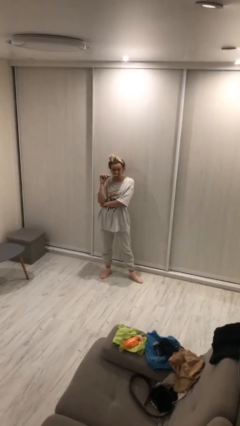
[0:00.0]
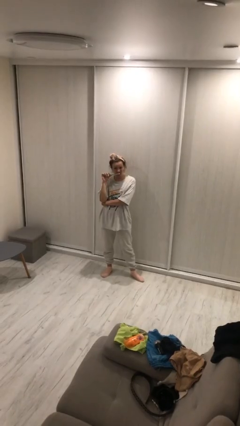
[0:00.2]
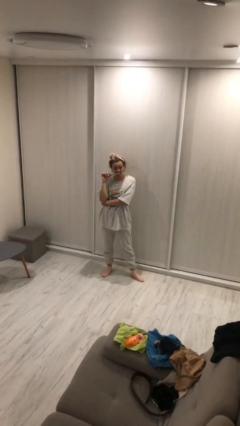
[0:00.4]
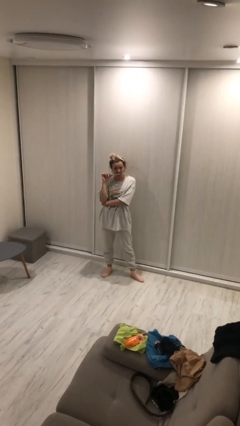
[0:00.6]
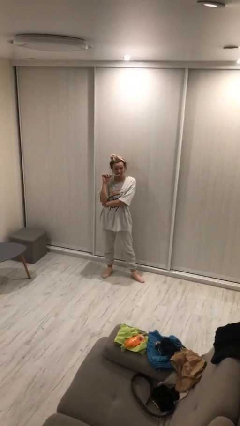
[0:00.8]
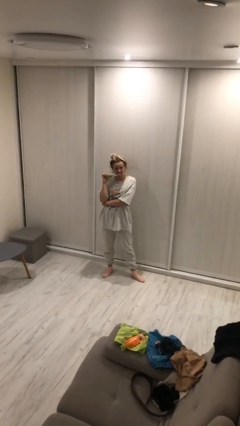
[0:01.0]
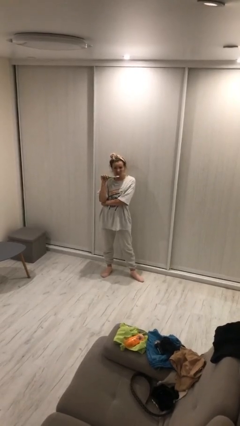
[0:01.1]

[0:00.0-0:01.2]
person brushes teeth

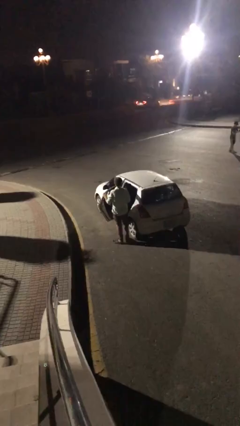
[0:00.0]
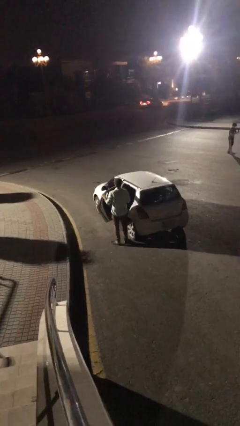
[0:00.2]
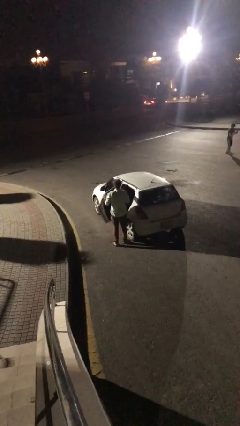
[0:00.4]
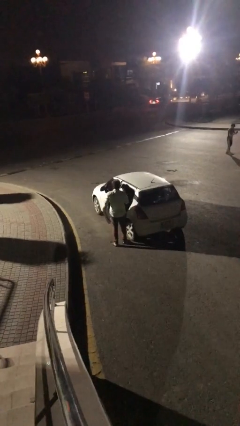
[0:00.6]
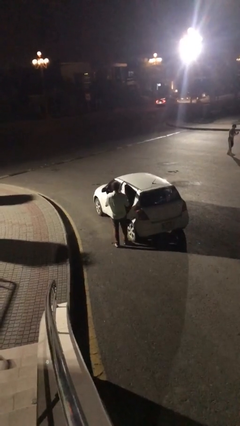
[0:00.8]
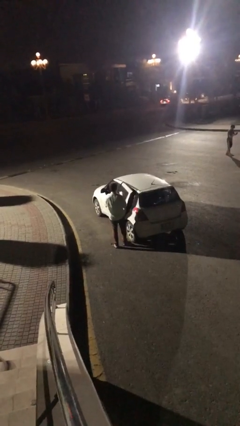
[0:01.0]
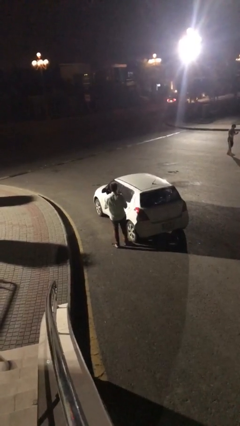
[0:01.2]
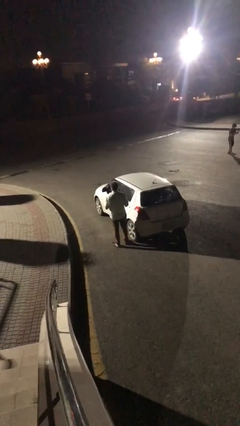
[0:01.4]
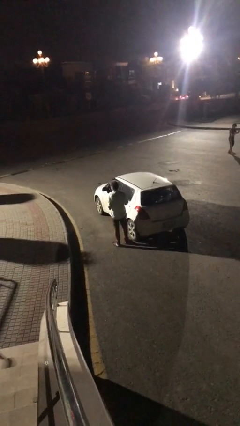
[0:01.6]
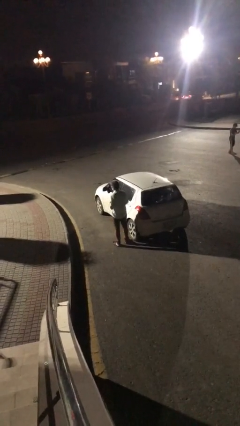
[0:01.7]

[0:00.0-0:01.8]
person closes car door

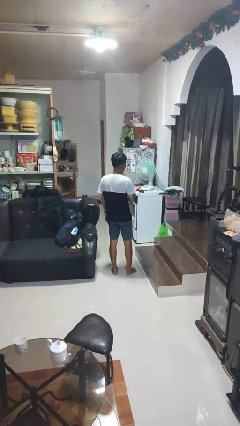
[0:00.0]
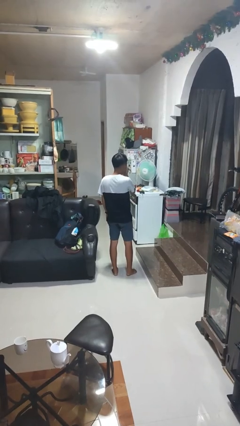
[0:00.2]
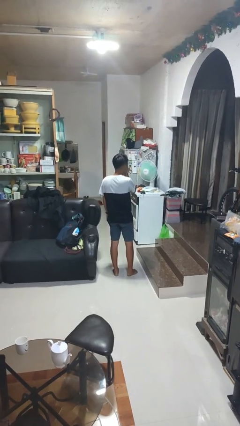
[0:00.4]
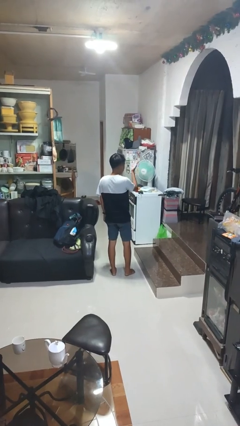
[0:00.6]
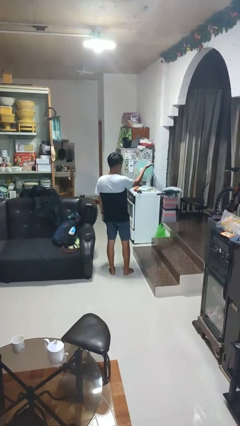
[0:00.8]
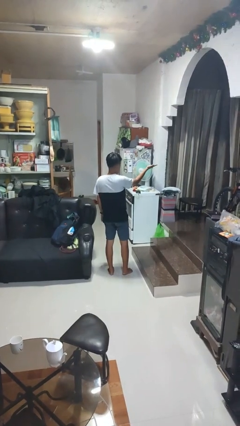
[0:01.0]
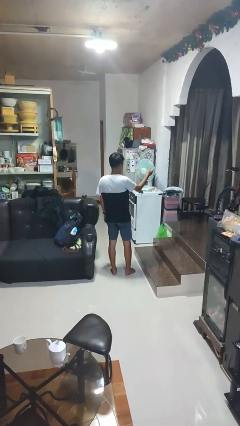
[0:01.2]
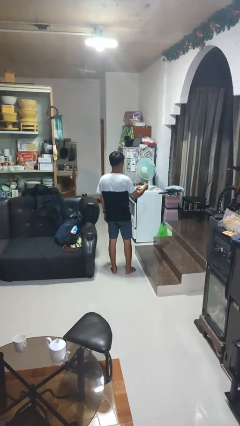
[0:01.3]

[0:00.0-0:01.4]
person gestures blow kiss

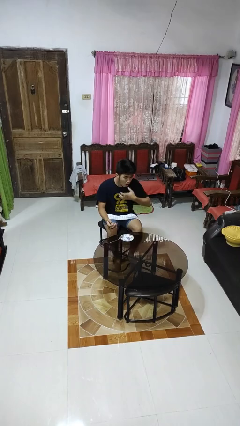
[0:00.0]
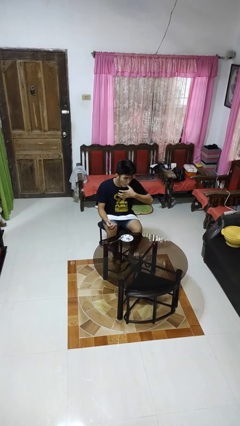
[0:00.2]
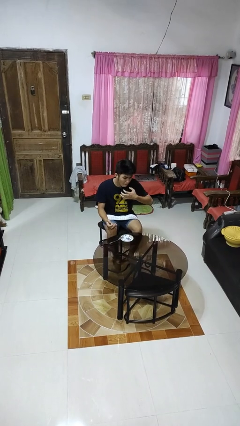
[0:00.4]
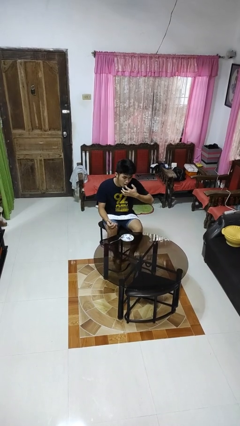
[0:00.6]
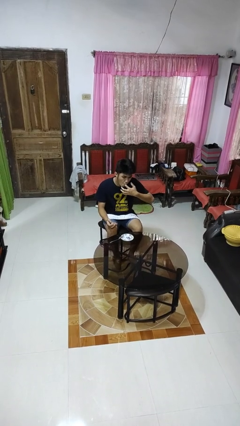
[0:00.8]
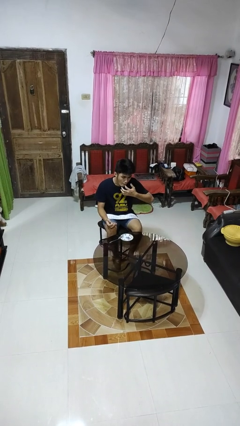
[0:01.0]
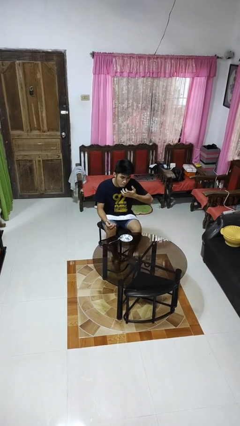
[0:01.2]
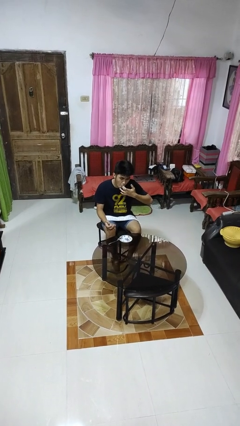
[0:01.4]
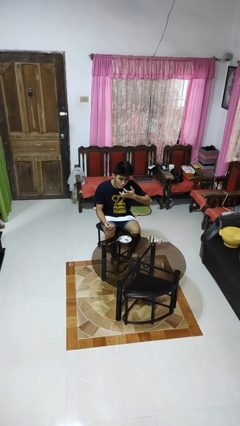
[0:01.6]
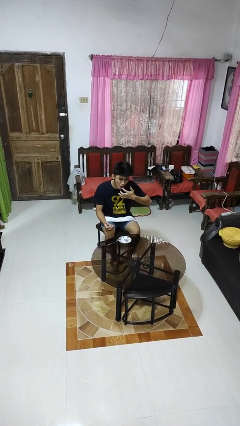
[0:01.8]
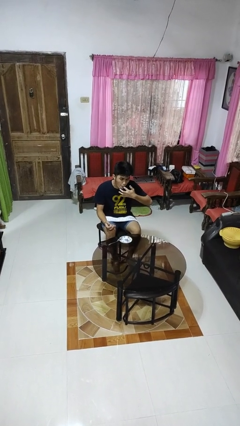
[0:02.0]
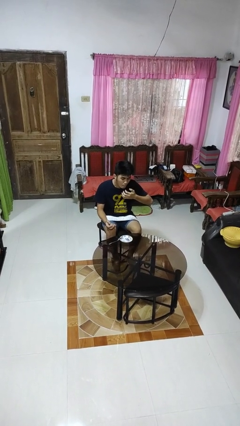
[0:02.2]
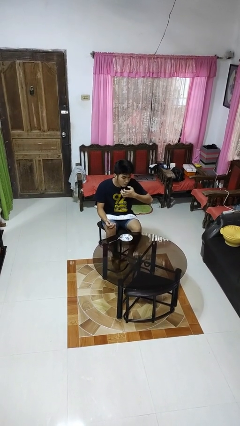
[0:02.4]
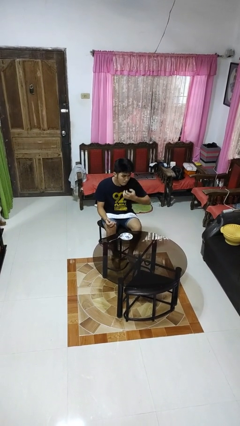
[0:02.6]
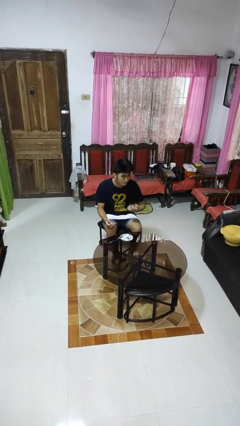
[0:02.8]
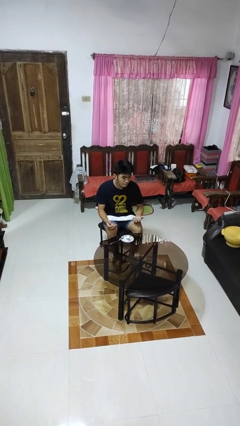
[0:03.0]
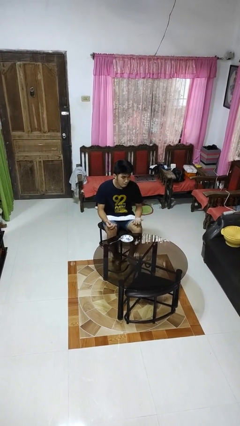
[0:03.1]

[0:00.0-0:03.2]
person licks fingers

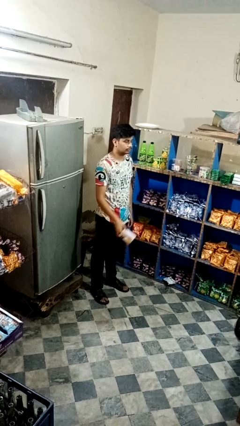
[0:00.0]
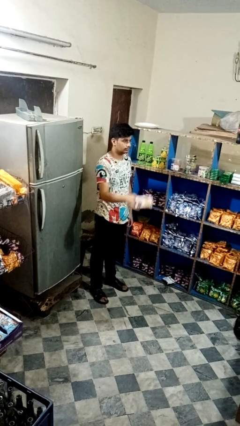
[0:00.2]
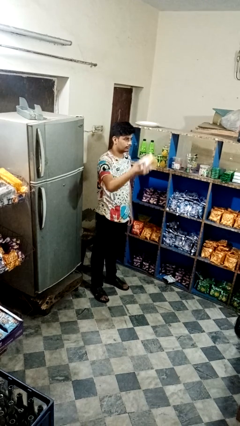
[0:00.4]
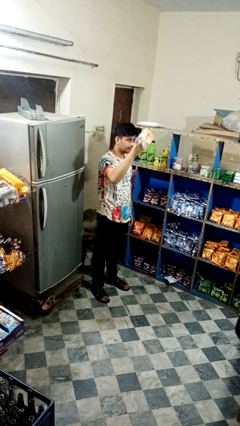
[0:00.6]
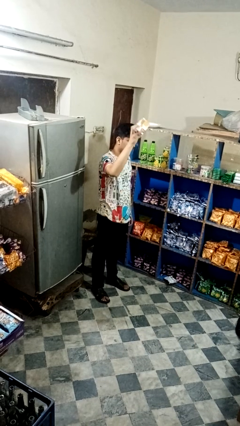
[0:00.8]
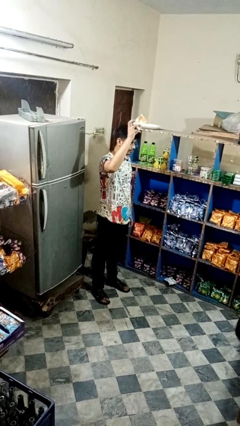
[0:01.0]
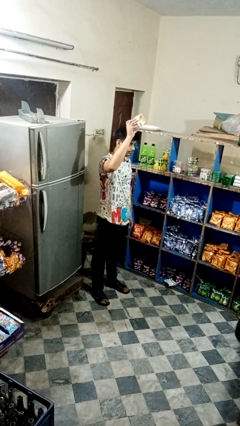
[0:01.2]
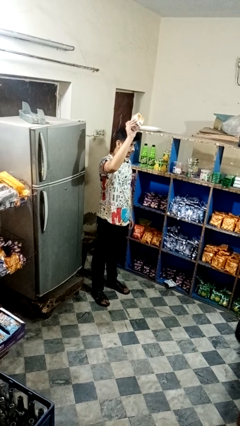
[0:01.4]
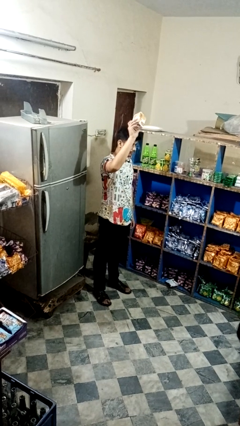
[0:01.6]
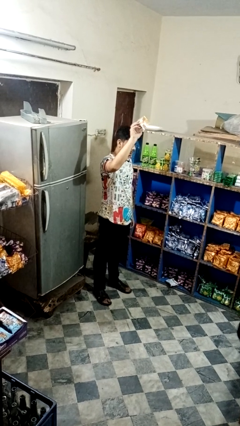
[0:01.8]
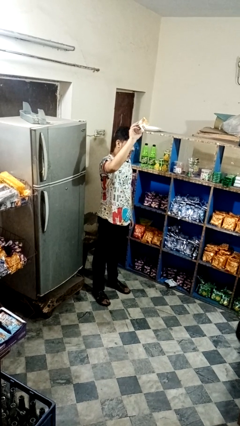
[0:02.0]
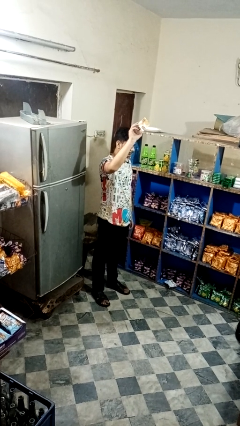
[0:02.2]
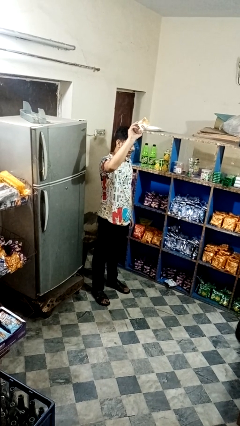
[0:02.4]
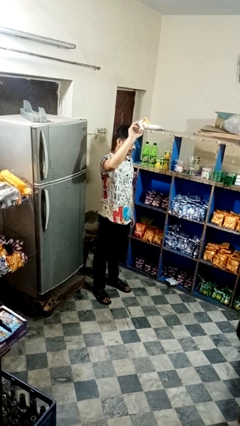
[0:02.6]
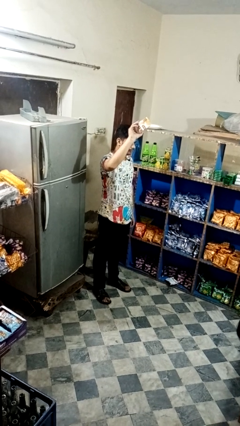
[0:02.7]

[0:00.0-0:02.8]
person holds object above head

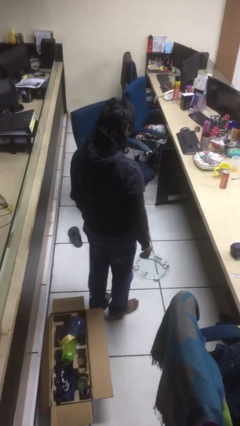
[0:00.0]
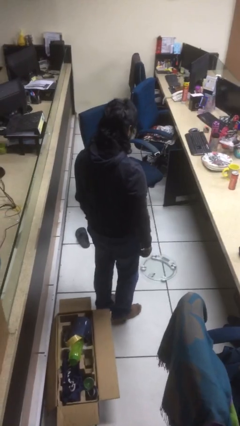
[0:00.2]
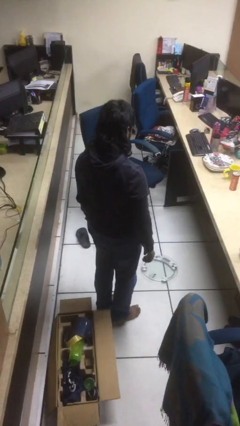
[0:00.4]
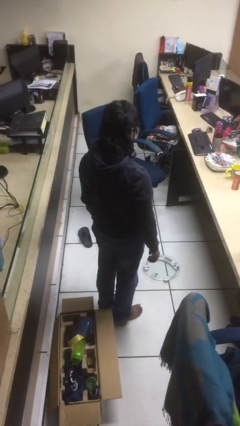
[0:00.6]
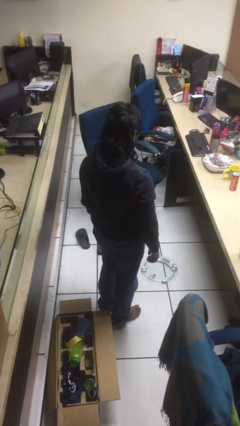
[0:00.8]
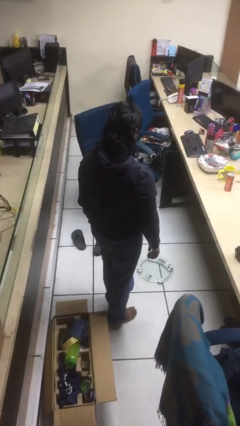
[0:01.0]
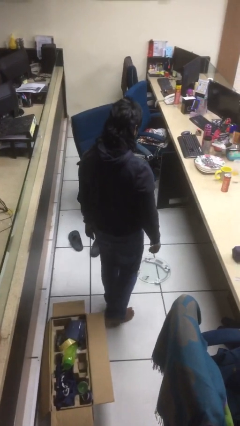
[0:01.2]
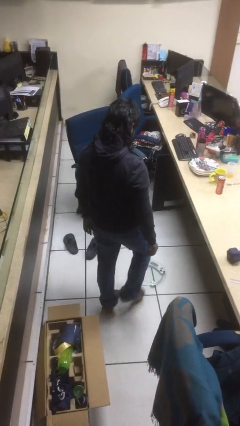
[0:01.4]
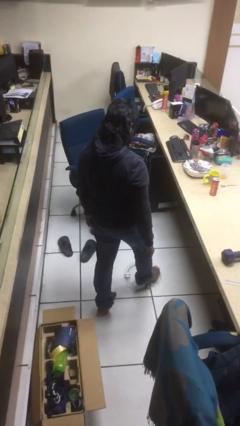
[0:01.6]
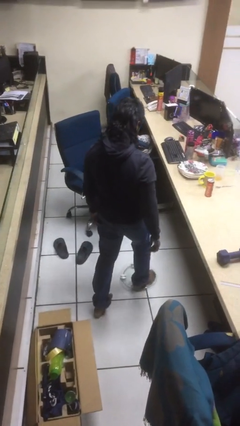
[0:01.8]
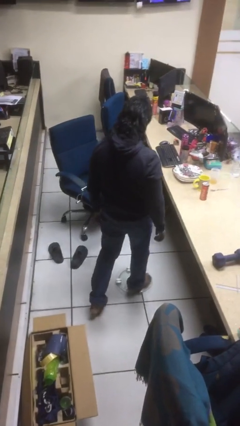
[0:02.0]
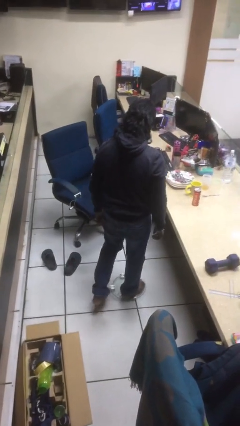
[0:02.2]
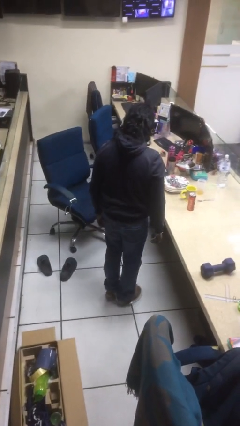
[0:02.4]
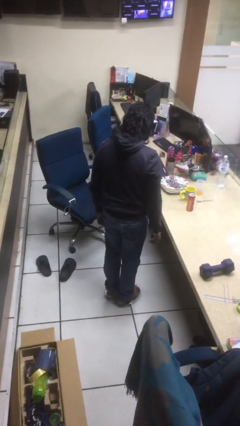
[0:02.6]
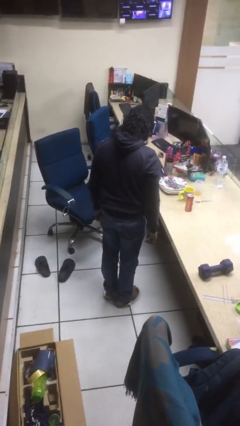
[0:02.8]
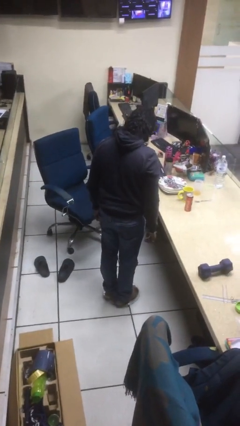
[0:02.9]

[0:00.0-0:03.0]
person uses bodyweight scale

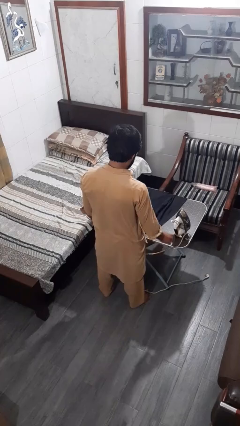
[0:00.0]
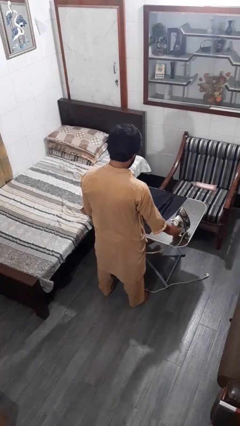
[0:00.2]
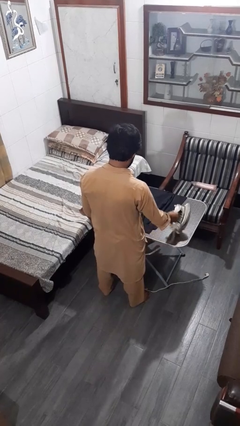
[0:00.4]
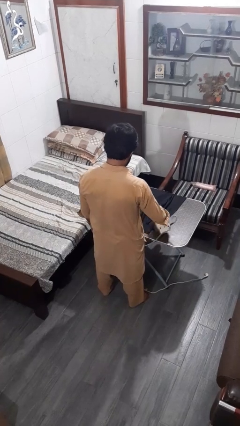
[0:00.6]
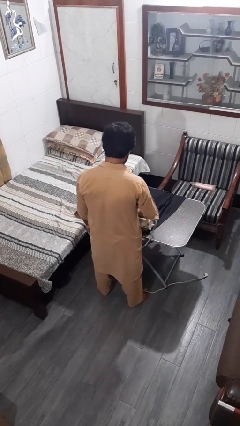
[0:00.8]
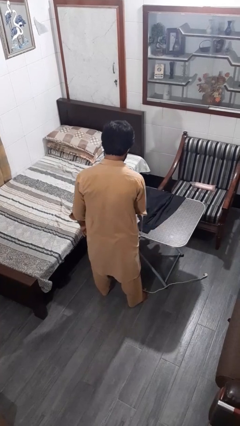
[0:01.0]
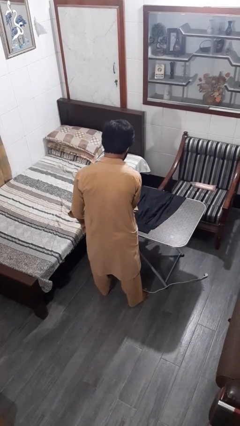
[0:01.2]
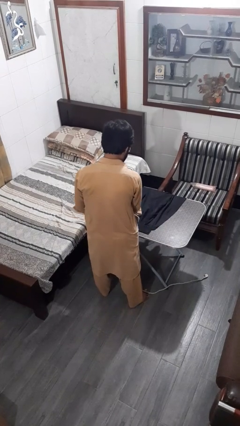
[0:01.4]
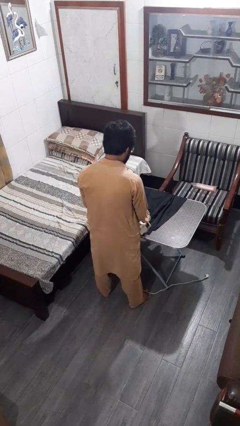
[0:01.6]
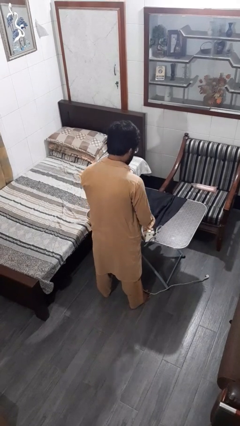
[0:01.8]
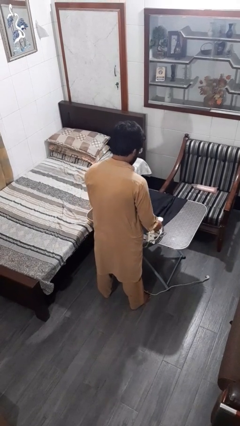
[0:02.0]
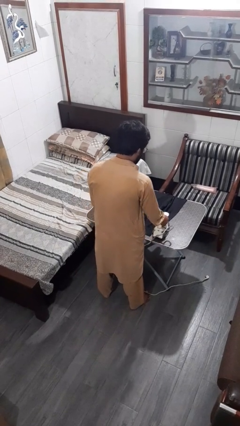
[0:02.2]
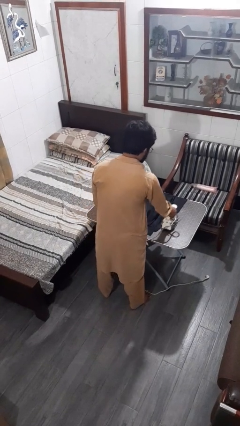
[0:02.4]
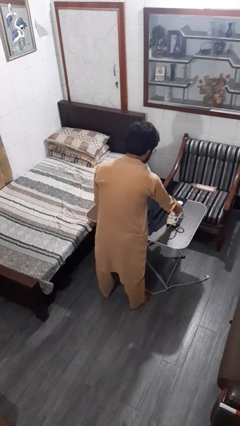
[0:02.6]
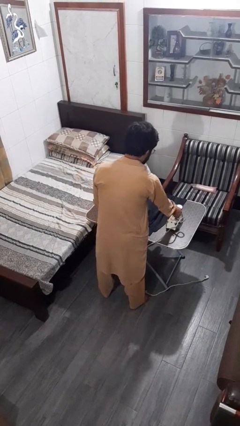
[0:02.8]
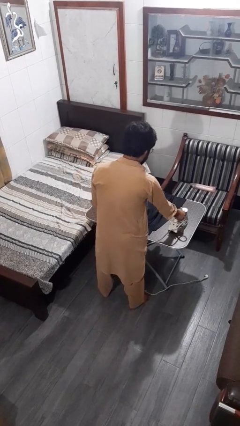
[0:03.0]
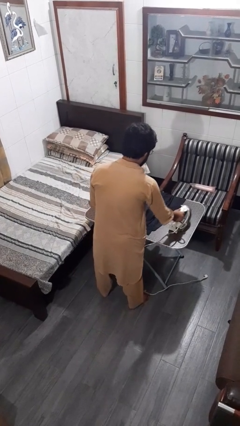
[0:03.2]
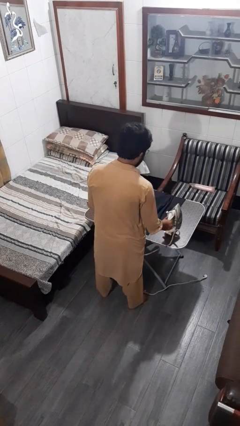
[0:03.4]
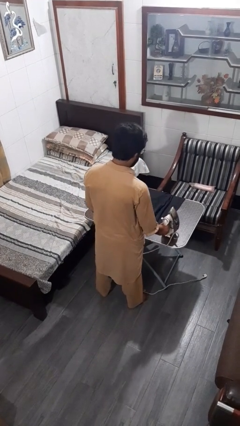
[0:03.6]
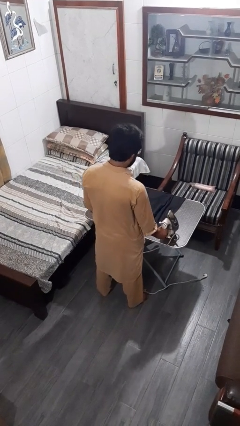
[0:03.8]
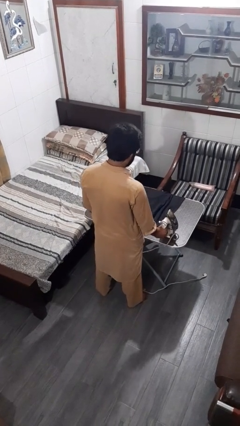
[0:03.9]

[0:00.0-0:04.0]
person irons clothes
